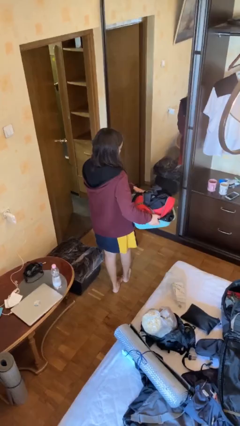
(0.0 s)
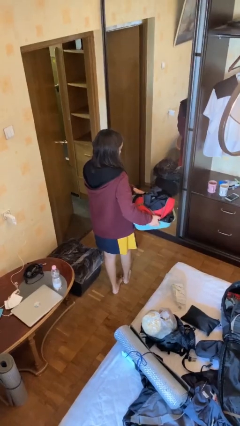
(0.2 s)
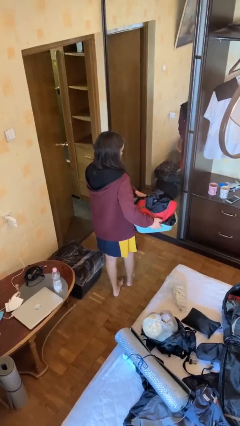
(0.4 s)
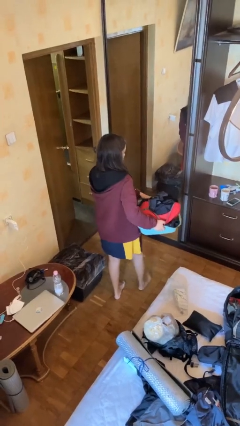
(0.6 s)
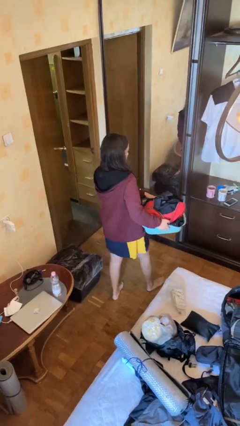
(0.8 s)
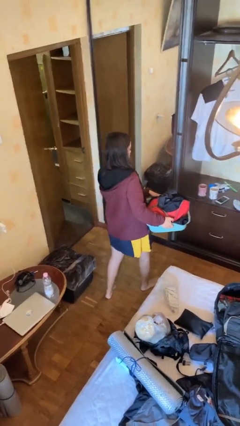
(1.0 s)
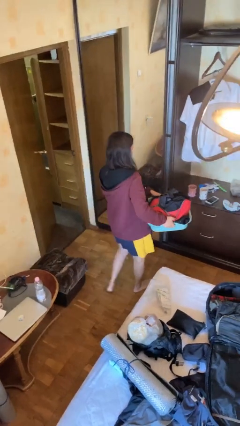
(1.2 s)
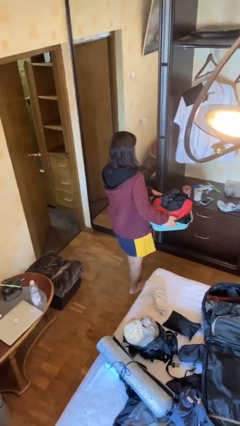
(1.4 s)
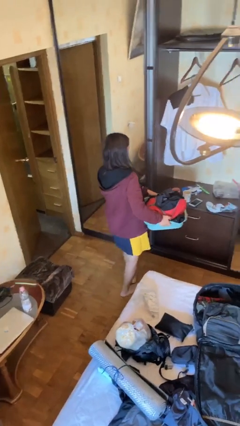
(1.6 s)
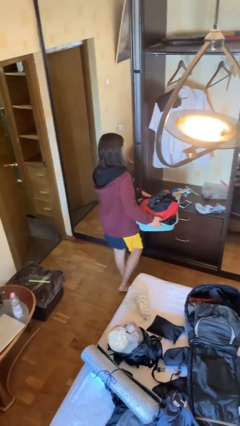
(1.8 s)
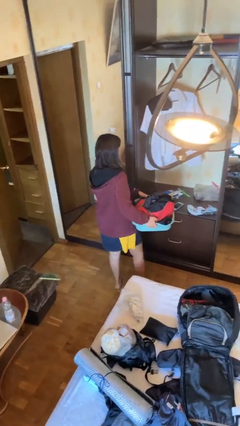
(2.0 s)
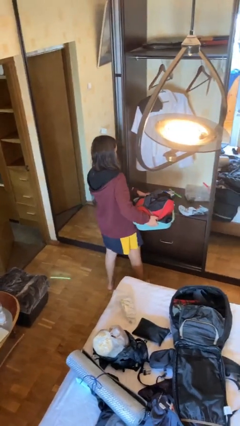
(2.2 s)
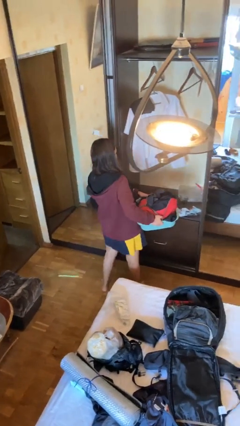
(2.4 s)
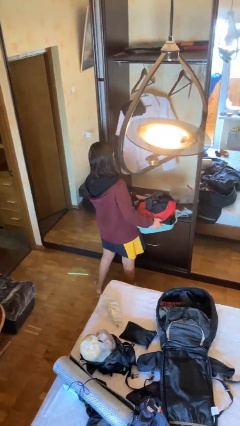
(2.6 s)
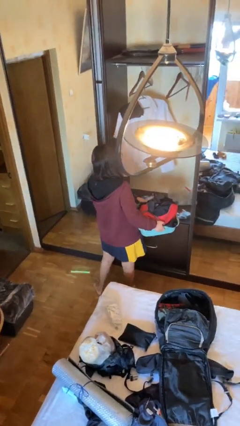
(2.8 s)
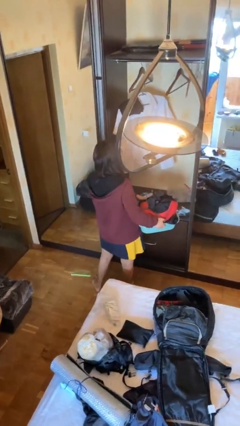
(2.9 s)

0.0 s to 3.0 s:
person carries laundry basket

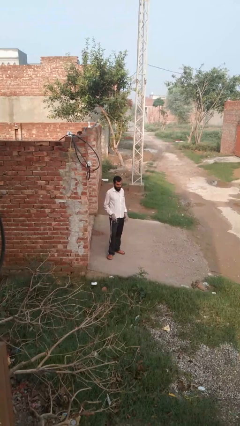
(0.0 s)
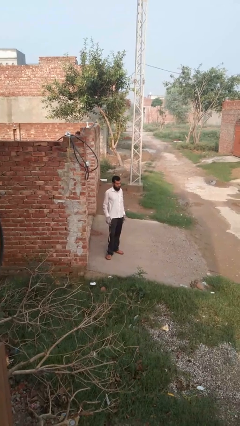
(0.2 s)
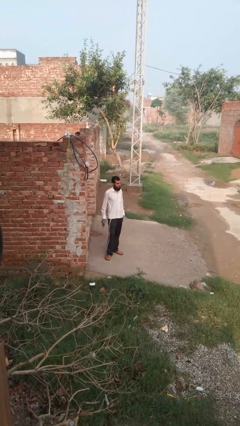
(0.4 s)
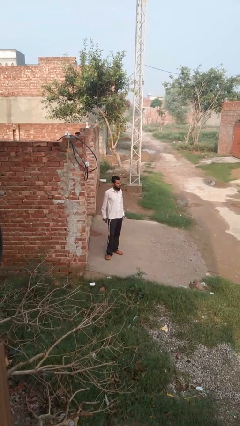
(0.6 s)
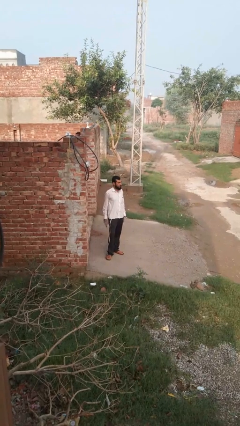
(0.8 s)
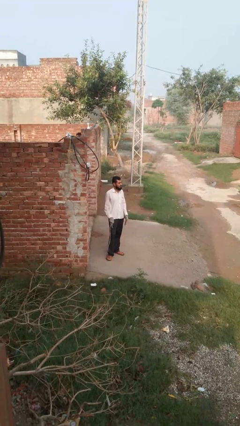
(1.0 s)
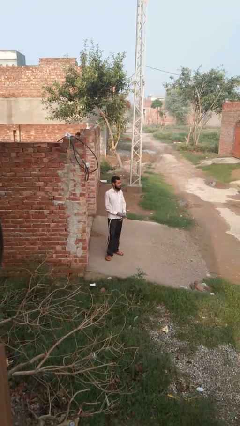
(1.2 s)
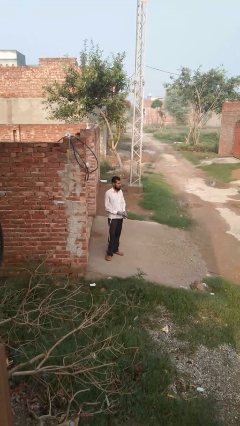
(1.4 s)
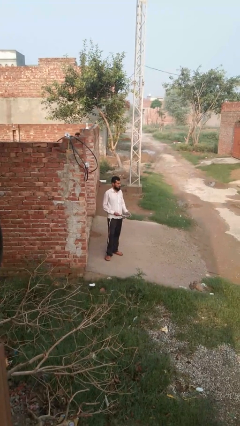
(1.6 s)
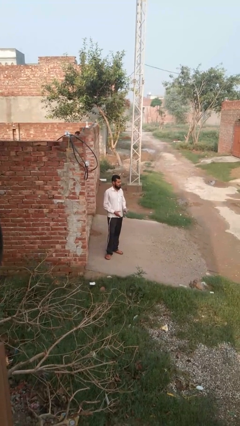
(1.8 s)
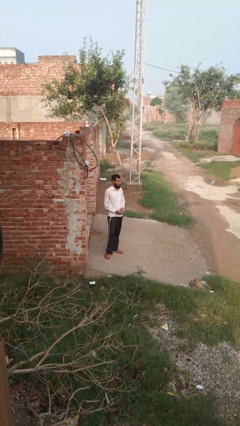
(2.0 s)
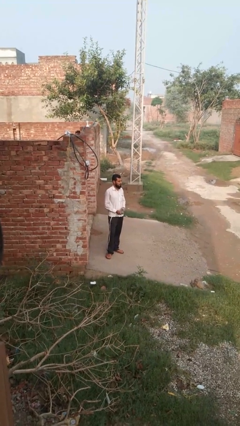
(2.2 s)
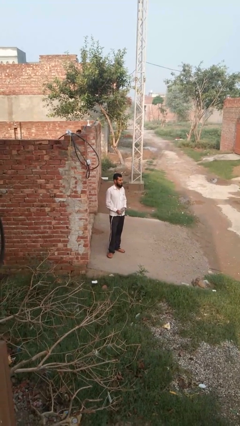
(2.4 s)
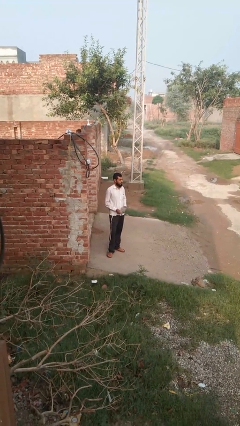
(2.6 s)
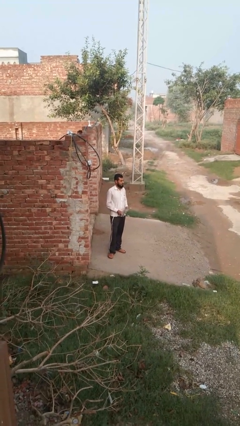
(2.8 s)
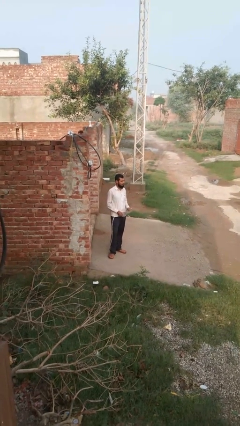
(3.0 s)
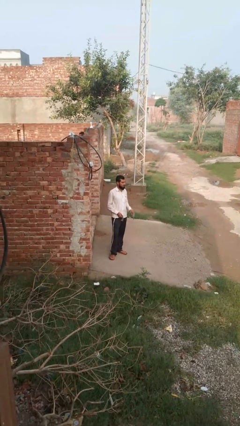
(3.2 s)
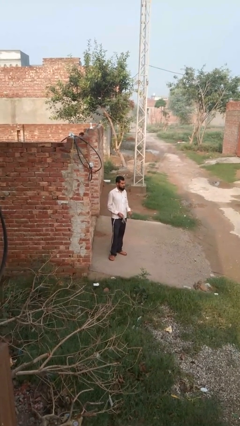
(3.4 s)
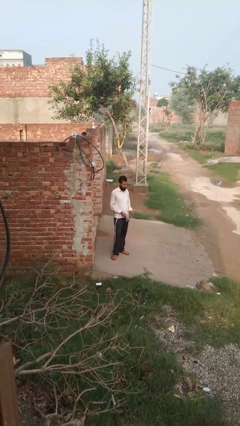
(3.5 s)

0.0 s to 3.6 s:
person takes off gloves

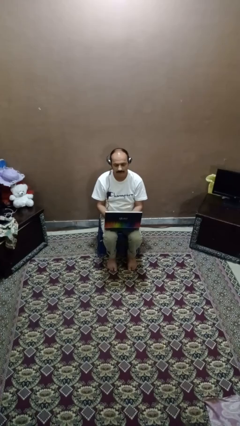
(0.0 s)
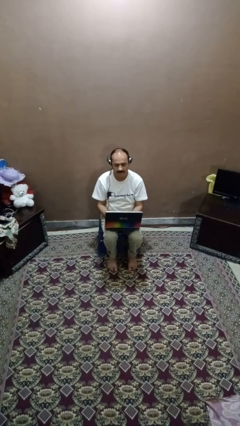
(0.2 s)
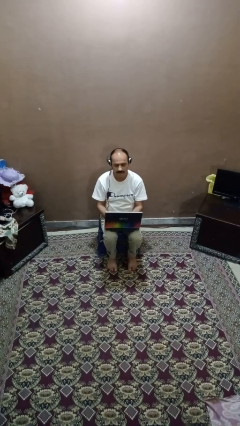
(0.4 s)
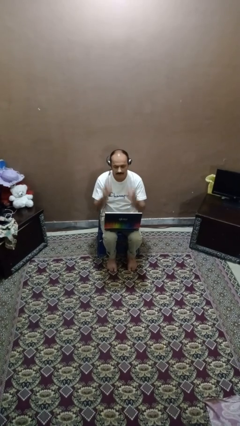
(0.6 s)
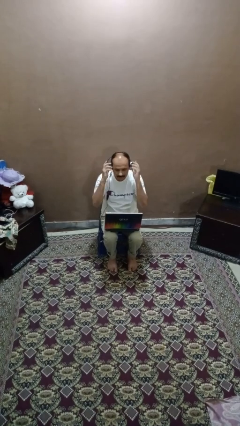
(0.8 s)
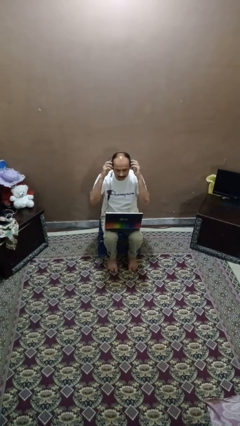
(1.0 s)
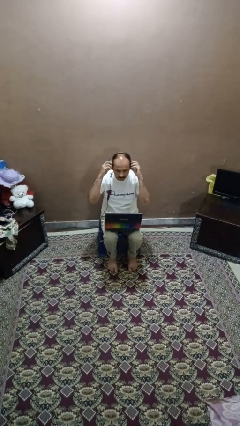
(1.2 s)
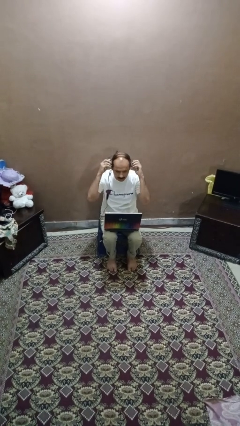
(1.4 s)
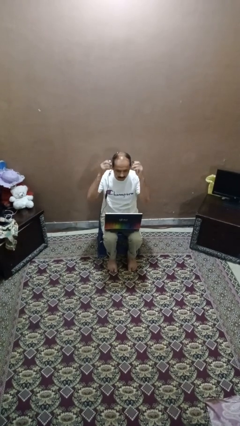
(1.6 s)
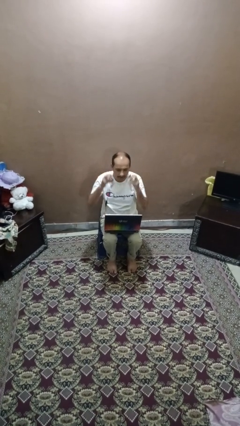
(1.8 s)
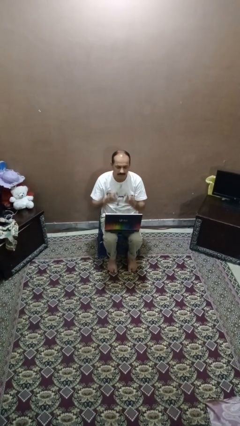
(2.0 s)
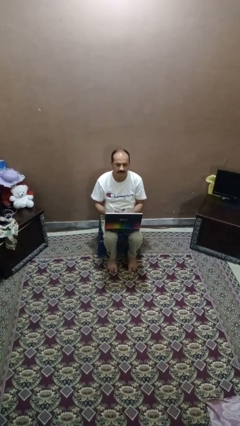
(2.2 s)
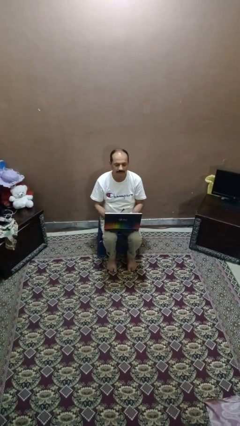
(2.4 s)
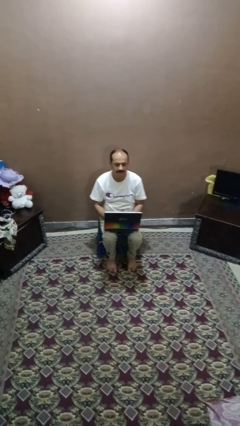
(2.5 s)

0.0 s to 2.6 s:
person takes off headphones

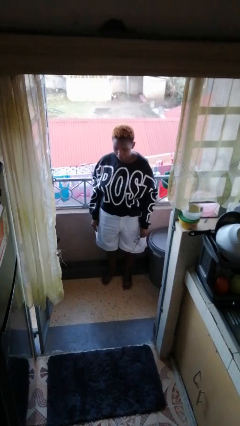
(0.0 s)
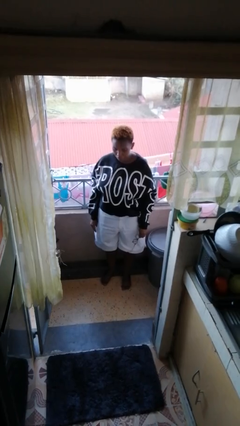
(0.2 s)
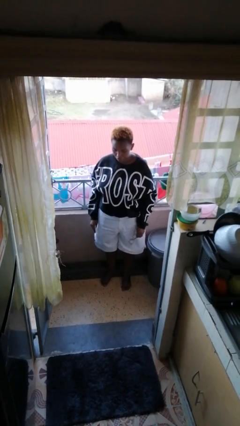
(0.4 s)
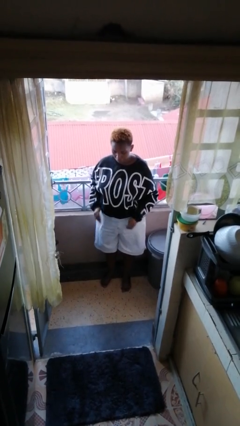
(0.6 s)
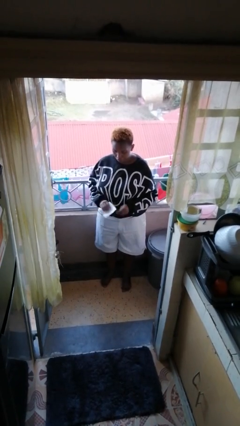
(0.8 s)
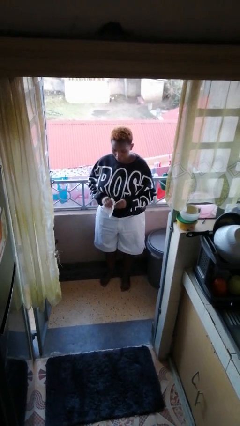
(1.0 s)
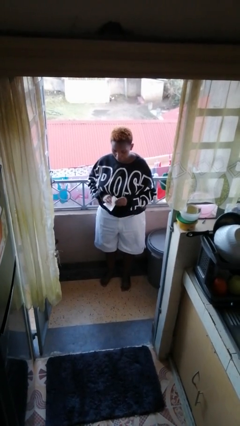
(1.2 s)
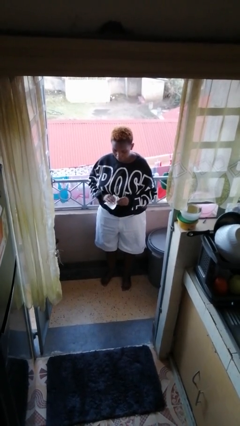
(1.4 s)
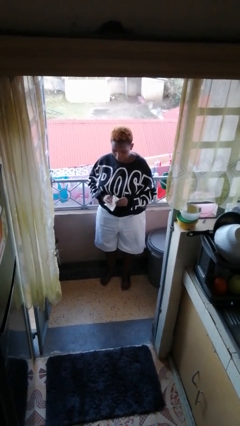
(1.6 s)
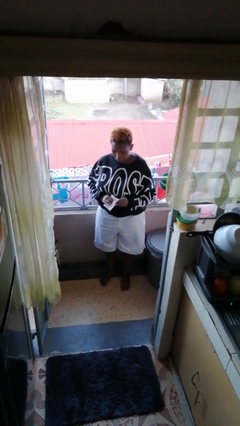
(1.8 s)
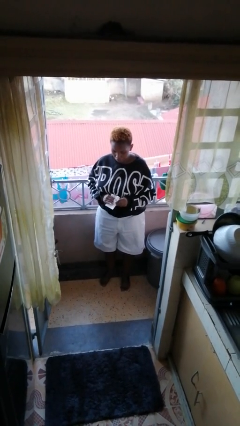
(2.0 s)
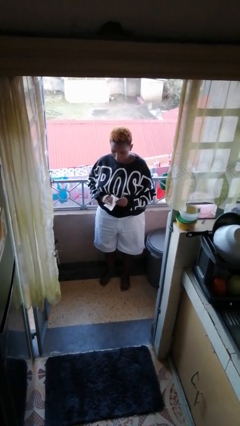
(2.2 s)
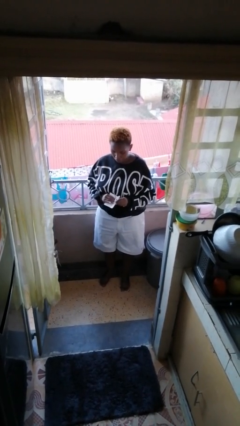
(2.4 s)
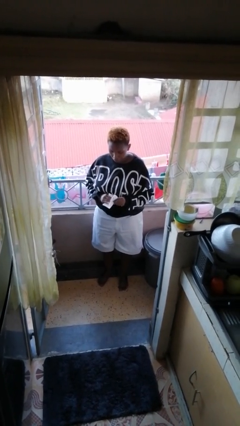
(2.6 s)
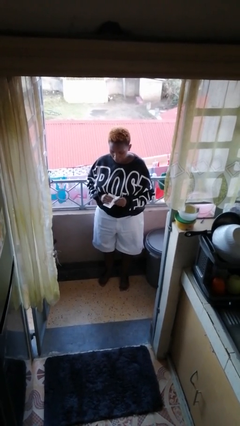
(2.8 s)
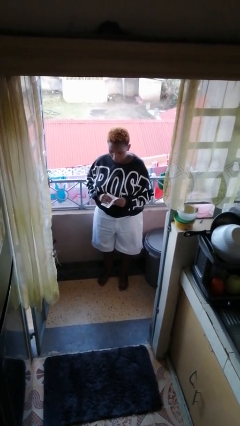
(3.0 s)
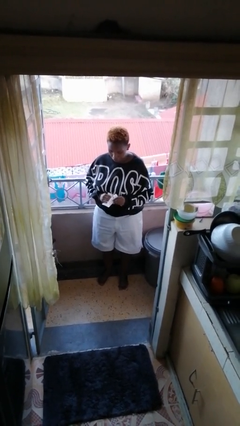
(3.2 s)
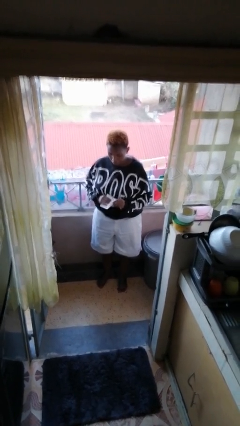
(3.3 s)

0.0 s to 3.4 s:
person cleans eyeglasses

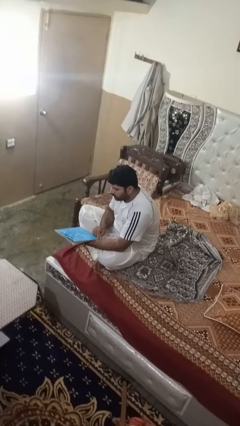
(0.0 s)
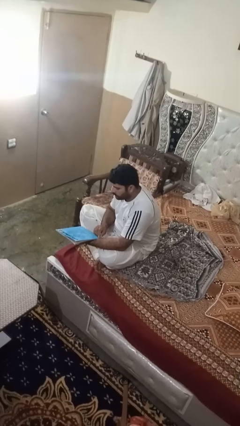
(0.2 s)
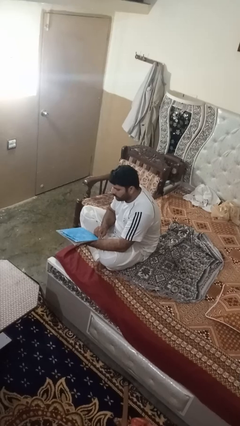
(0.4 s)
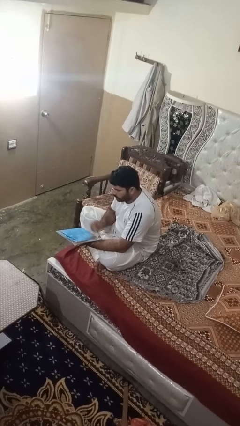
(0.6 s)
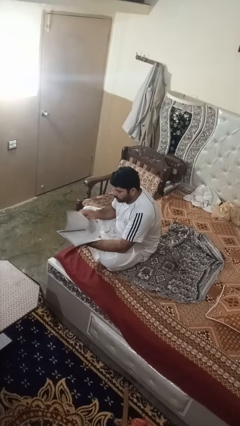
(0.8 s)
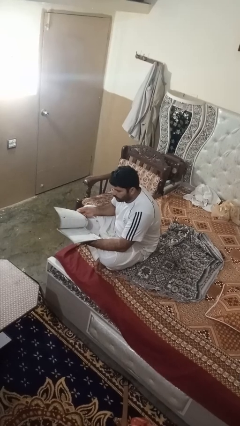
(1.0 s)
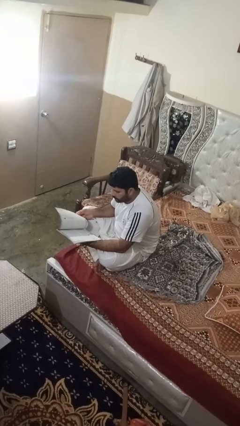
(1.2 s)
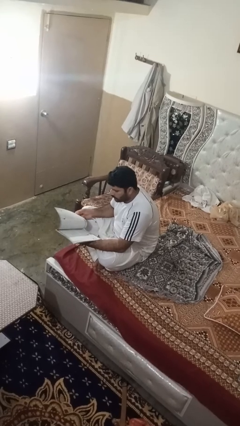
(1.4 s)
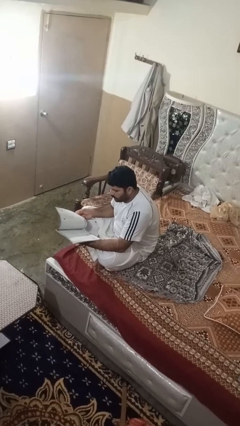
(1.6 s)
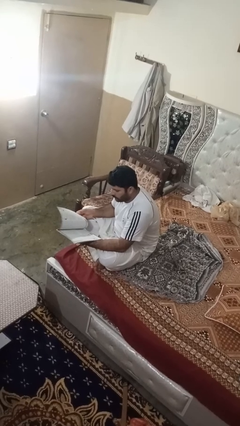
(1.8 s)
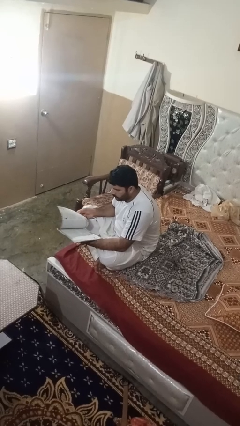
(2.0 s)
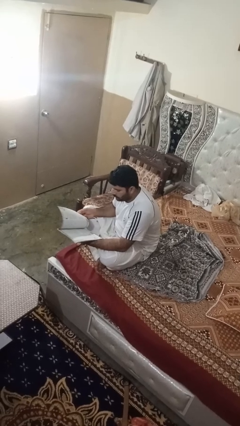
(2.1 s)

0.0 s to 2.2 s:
person reads magazine

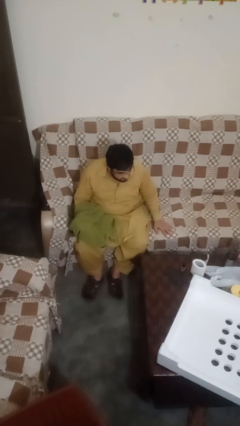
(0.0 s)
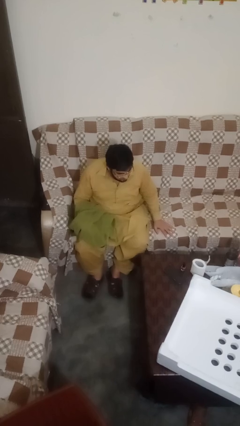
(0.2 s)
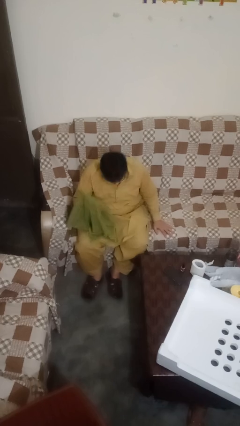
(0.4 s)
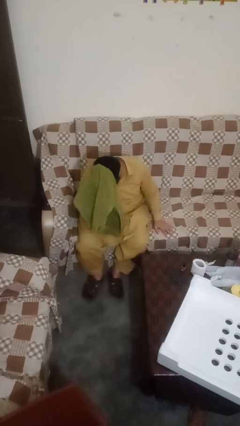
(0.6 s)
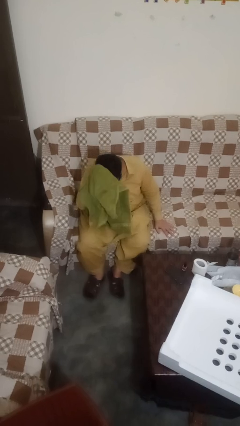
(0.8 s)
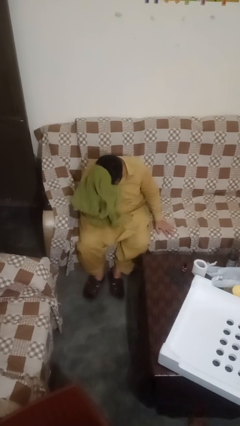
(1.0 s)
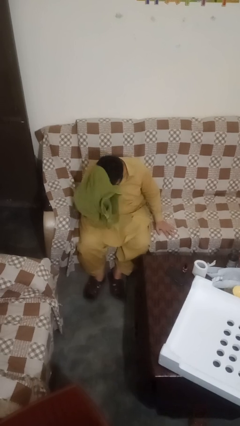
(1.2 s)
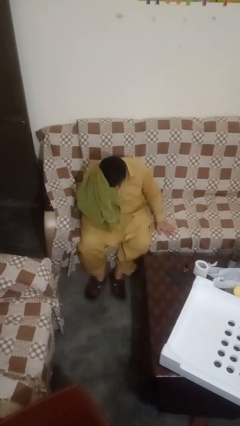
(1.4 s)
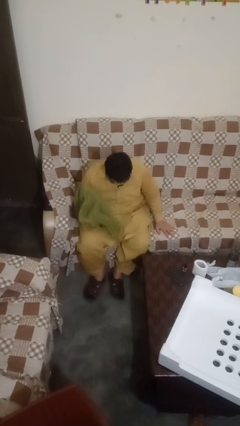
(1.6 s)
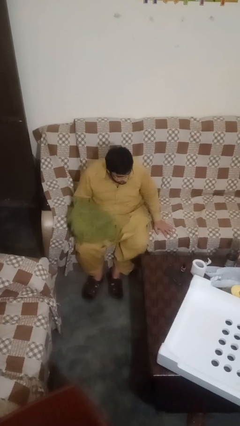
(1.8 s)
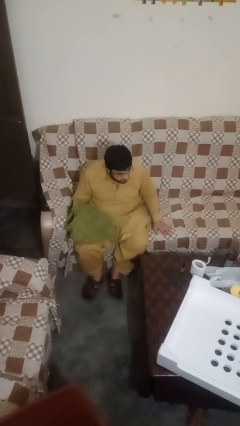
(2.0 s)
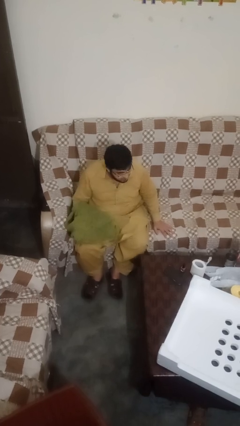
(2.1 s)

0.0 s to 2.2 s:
person dries hair with towel

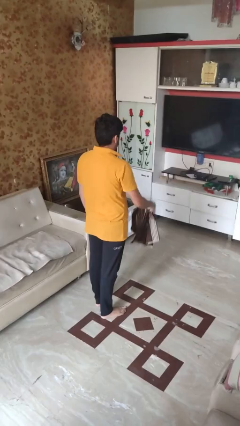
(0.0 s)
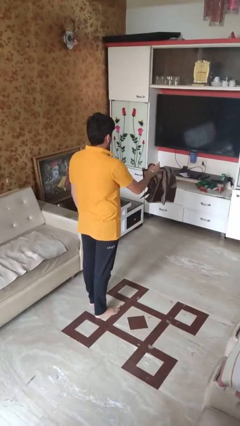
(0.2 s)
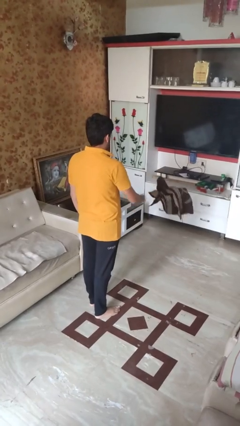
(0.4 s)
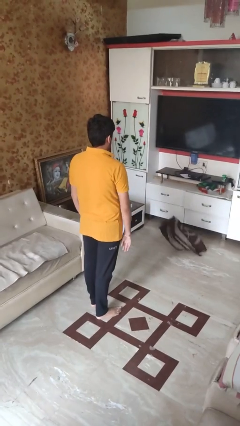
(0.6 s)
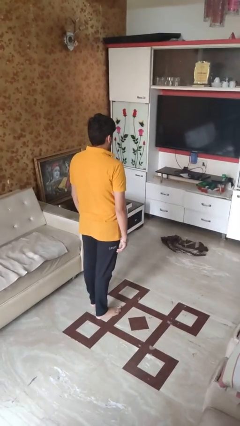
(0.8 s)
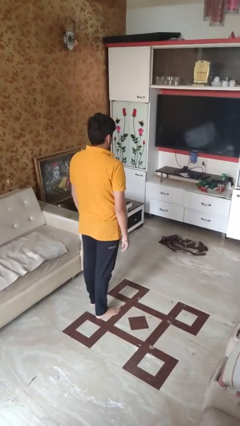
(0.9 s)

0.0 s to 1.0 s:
person throws object to ground
